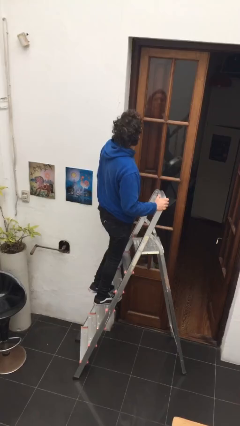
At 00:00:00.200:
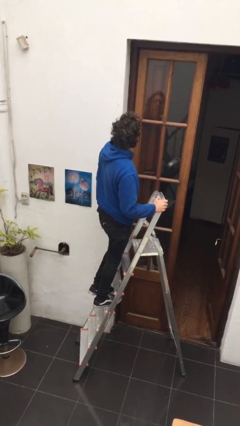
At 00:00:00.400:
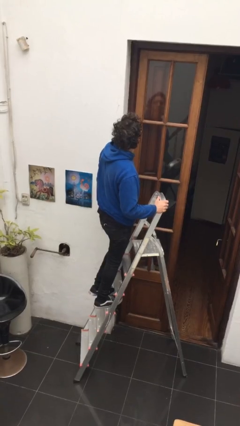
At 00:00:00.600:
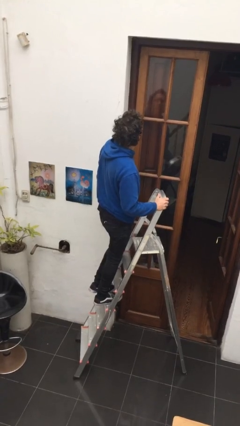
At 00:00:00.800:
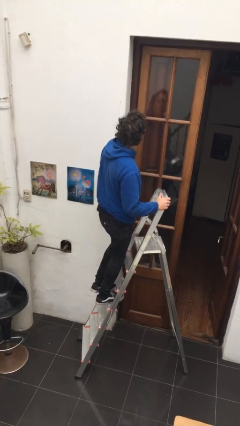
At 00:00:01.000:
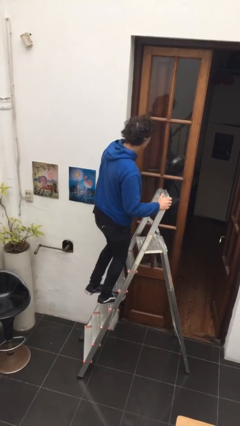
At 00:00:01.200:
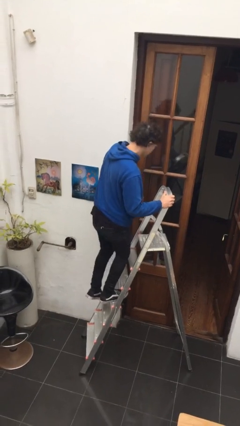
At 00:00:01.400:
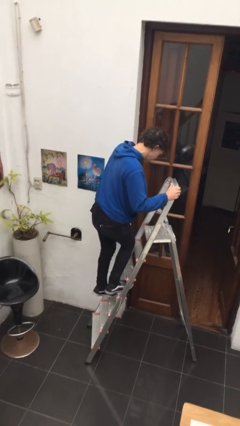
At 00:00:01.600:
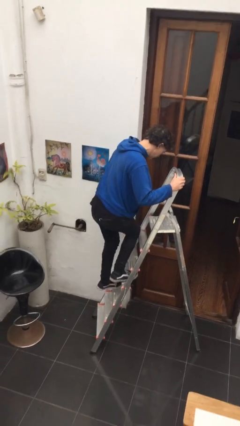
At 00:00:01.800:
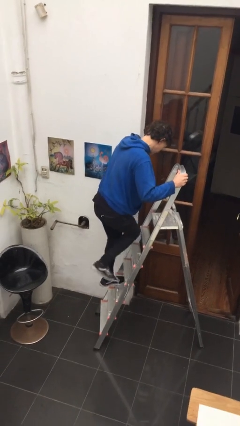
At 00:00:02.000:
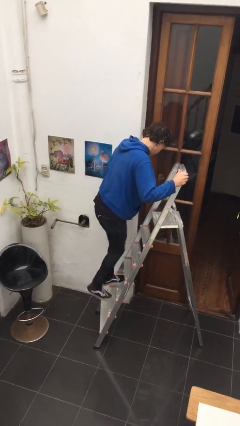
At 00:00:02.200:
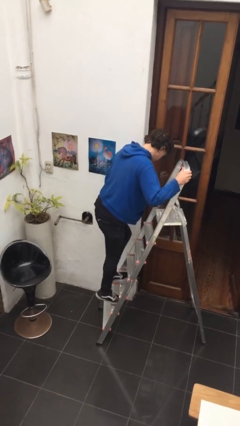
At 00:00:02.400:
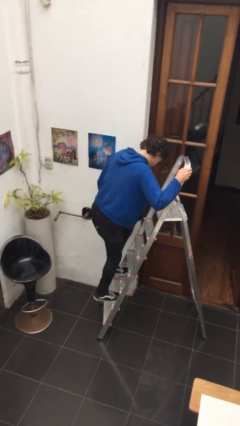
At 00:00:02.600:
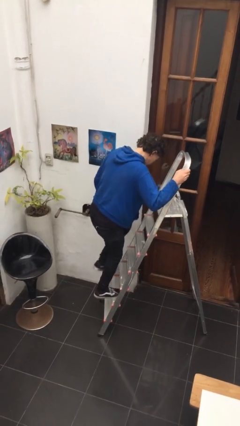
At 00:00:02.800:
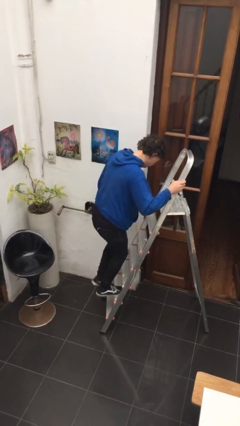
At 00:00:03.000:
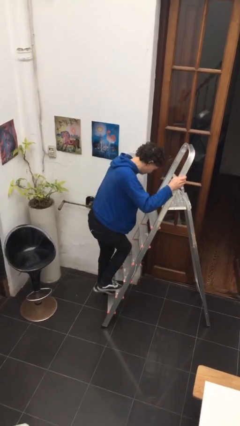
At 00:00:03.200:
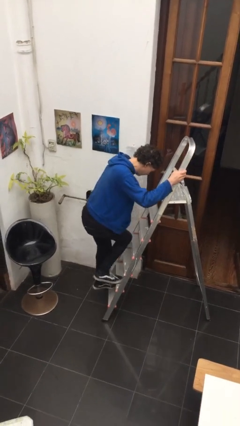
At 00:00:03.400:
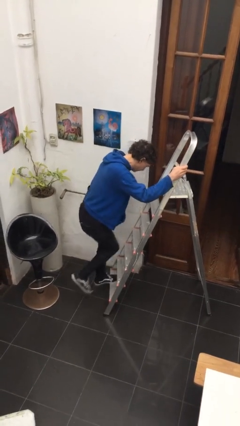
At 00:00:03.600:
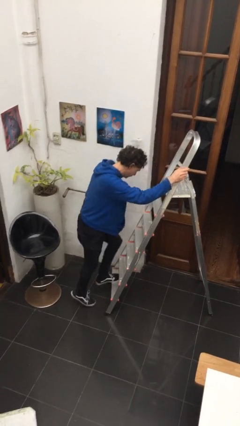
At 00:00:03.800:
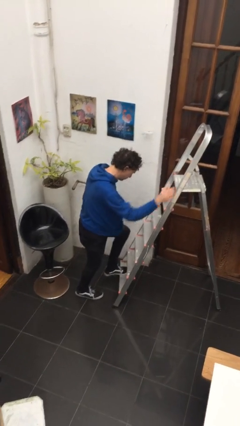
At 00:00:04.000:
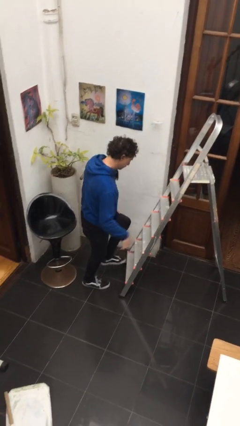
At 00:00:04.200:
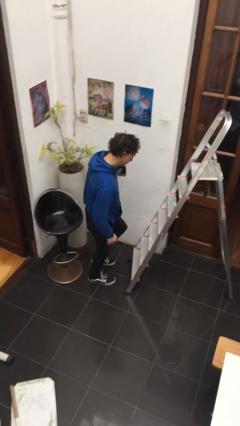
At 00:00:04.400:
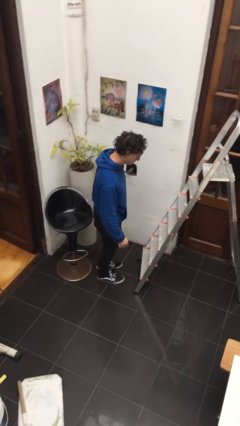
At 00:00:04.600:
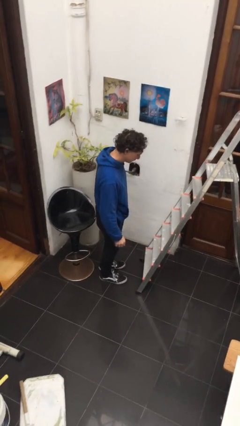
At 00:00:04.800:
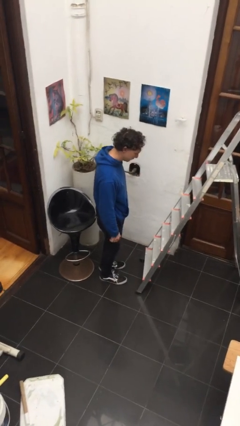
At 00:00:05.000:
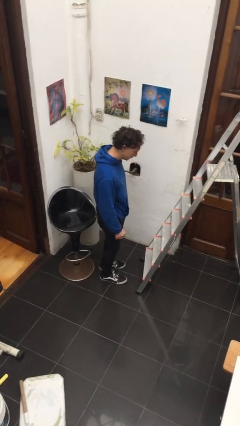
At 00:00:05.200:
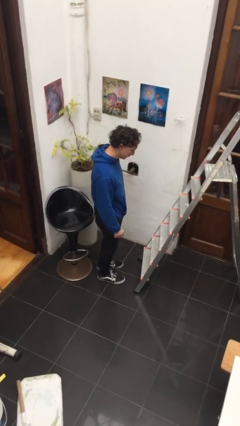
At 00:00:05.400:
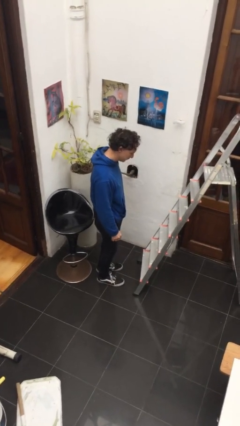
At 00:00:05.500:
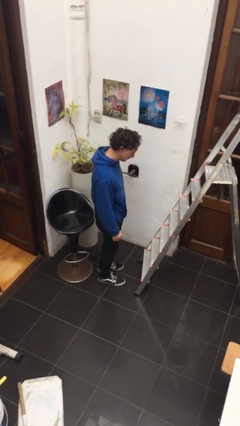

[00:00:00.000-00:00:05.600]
person climbs down ladder

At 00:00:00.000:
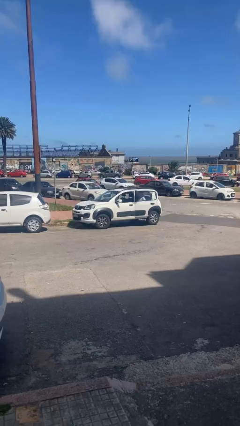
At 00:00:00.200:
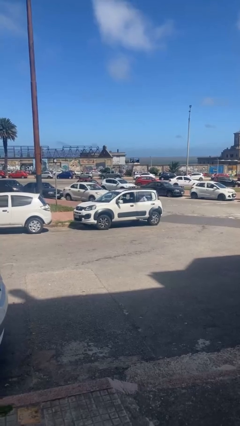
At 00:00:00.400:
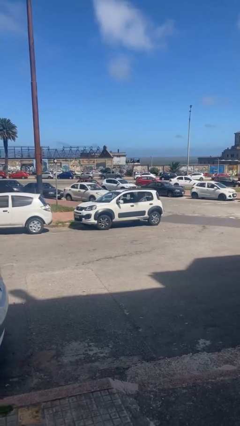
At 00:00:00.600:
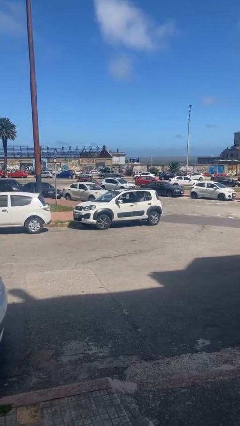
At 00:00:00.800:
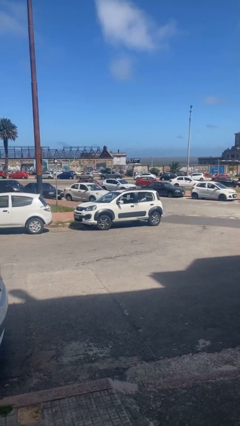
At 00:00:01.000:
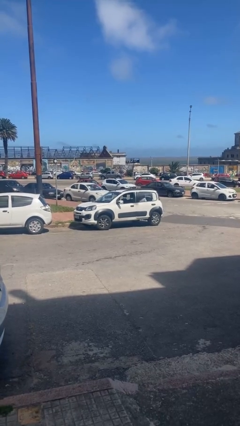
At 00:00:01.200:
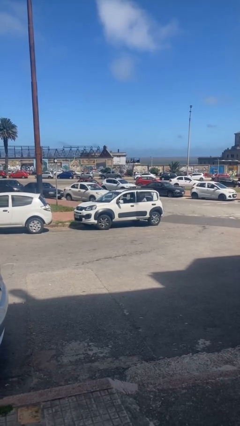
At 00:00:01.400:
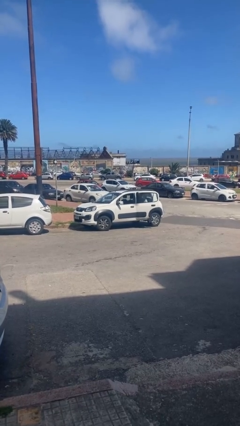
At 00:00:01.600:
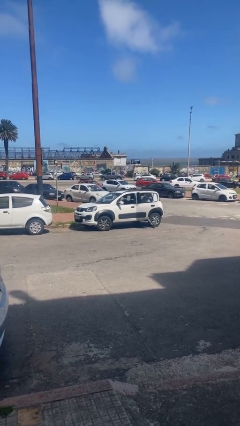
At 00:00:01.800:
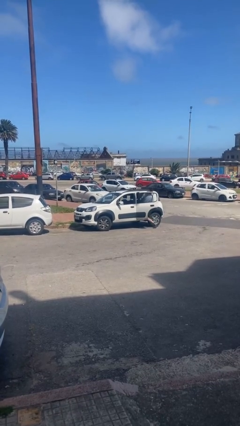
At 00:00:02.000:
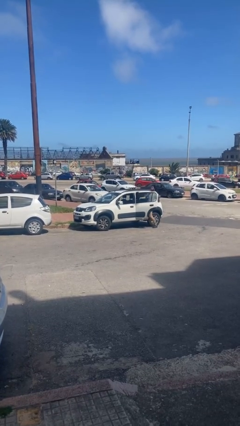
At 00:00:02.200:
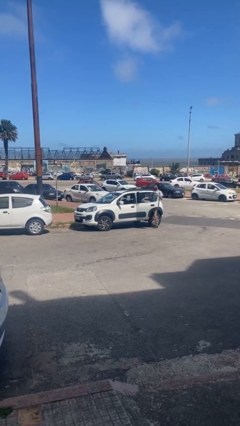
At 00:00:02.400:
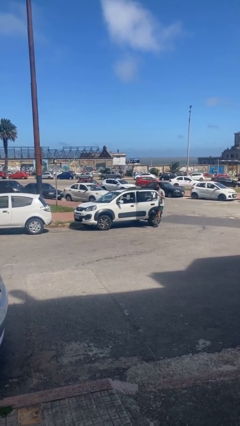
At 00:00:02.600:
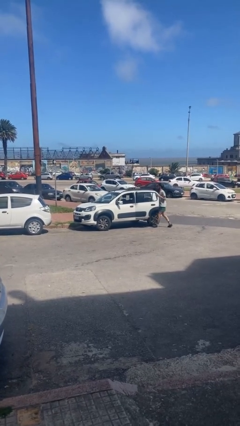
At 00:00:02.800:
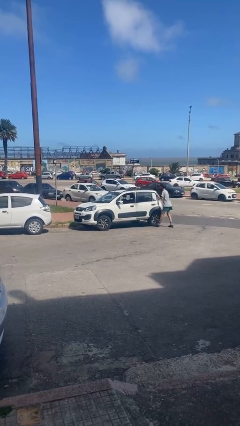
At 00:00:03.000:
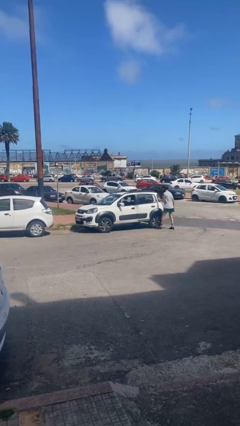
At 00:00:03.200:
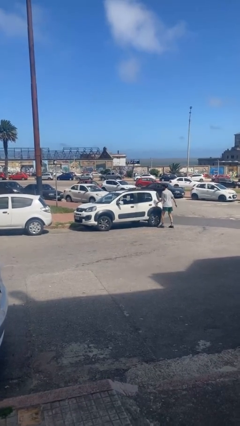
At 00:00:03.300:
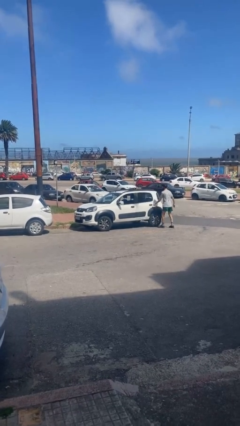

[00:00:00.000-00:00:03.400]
car drops off person

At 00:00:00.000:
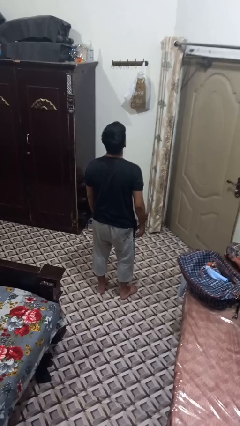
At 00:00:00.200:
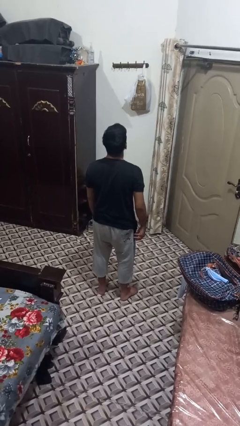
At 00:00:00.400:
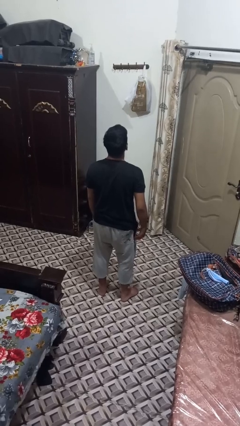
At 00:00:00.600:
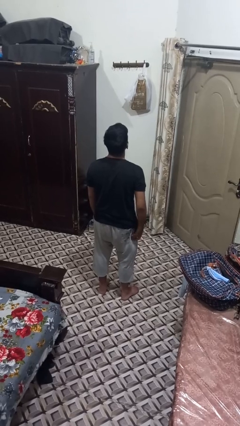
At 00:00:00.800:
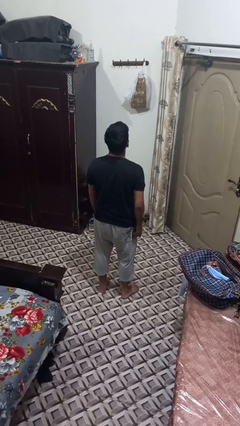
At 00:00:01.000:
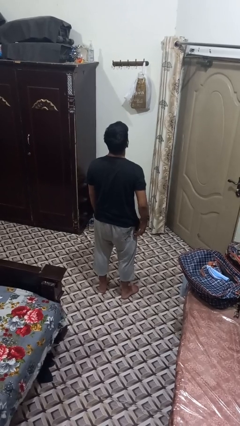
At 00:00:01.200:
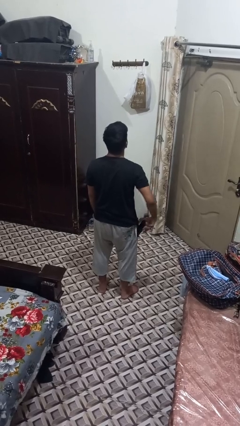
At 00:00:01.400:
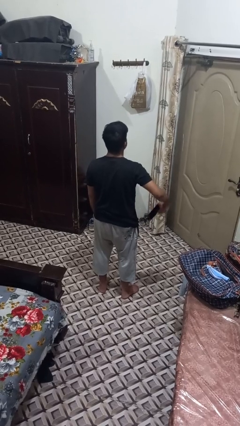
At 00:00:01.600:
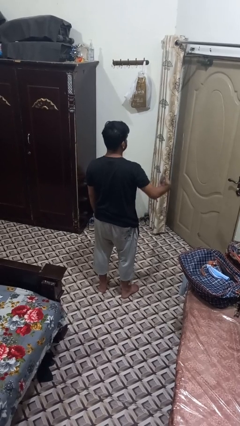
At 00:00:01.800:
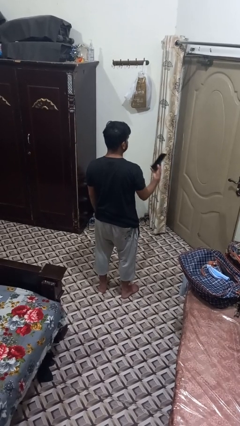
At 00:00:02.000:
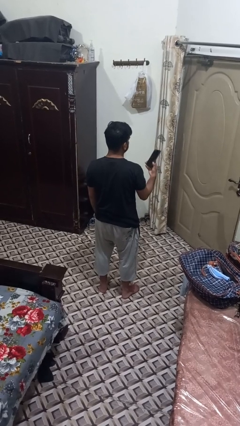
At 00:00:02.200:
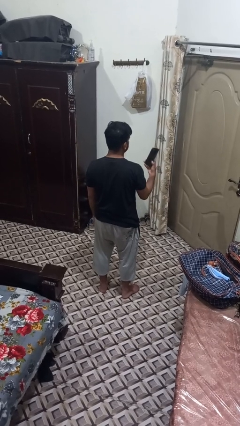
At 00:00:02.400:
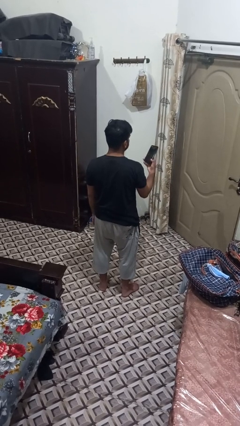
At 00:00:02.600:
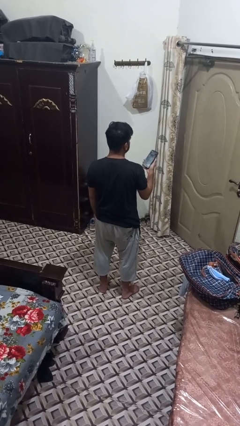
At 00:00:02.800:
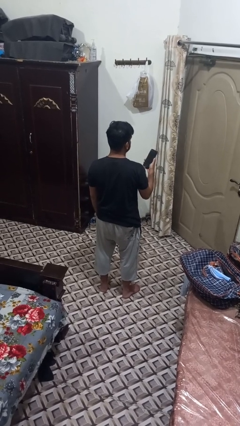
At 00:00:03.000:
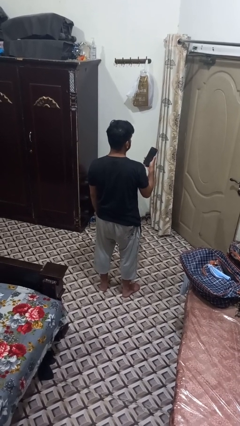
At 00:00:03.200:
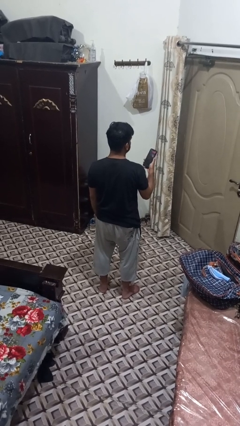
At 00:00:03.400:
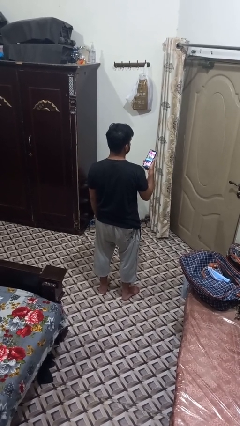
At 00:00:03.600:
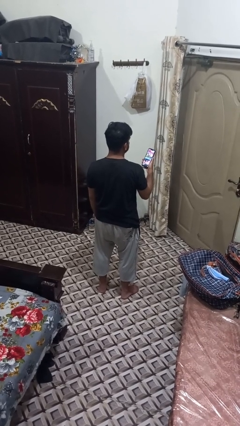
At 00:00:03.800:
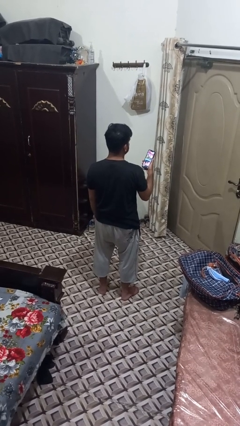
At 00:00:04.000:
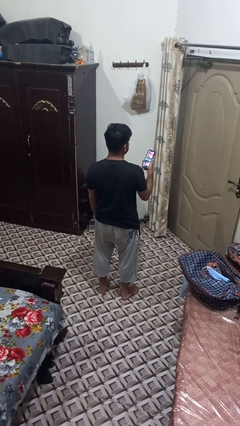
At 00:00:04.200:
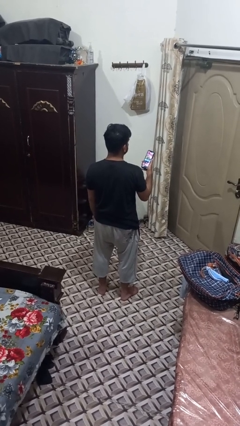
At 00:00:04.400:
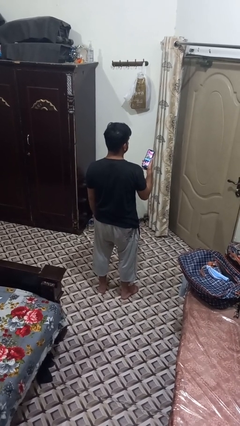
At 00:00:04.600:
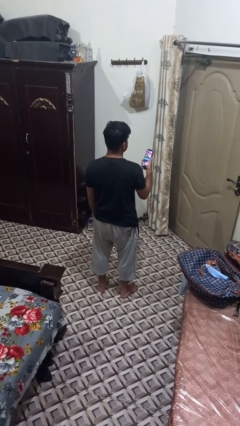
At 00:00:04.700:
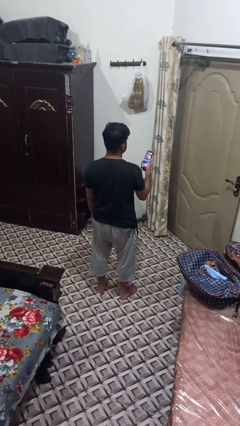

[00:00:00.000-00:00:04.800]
person takes phone from pocket

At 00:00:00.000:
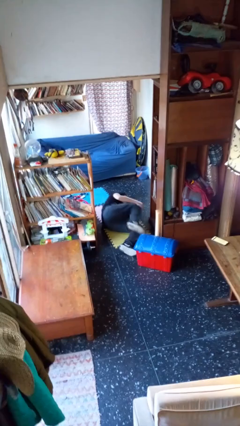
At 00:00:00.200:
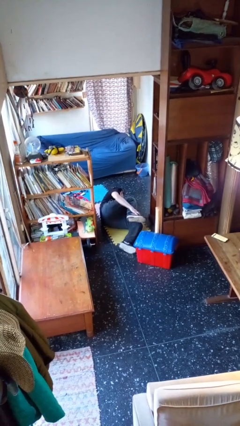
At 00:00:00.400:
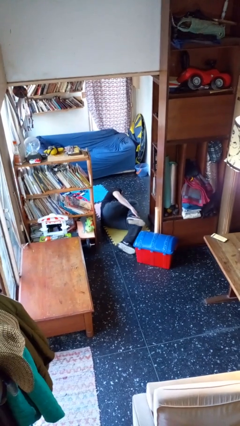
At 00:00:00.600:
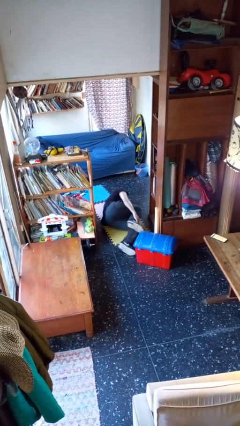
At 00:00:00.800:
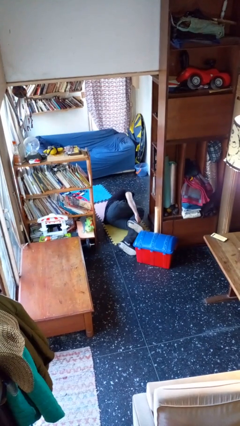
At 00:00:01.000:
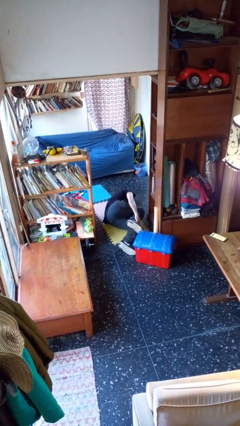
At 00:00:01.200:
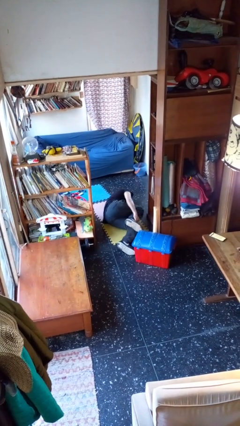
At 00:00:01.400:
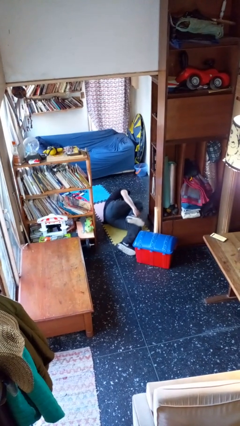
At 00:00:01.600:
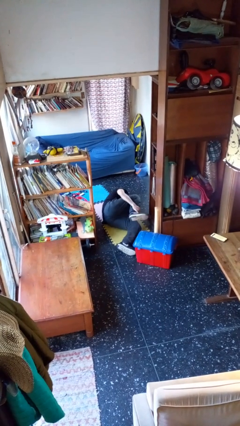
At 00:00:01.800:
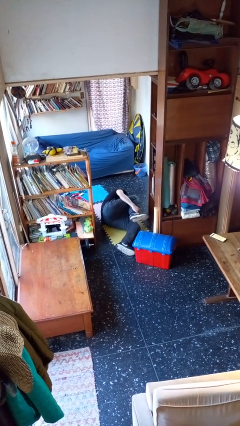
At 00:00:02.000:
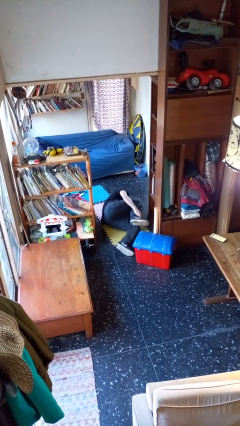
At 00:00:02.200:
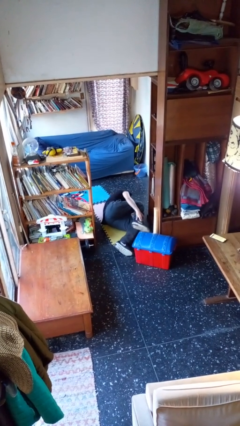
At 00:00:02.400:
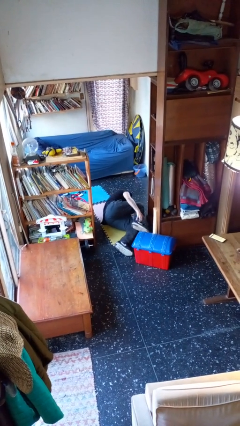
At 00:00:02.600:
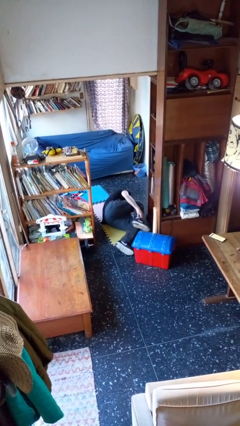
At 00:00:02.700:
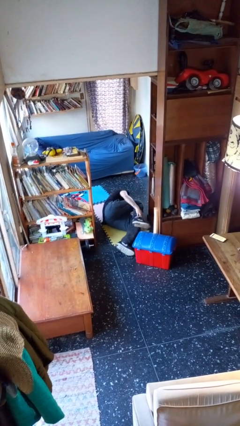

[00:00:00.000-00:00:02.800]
person lies down on floor

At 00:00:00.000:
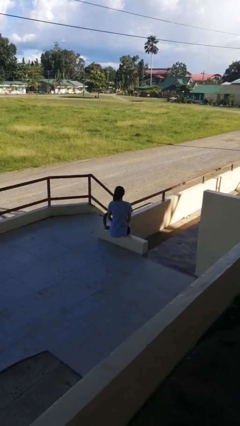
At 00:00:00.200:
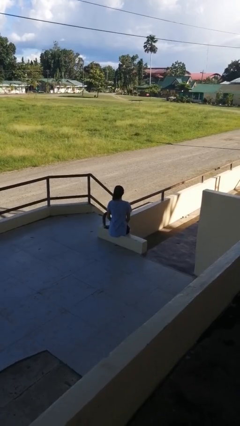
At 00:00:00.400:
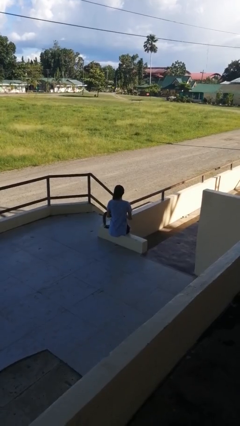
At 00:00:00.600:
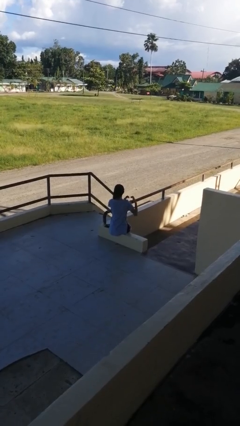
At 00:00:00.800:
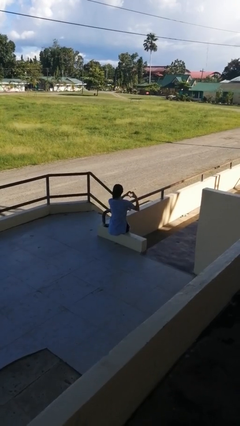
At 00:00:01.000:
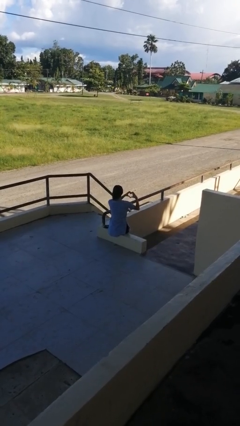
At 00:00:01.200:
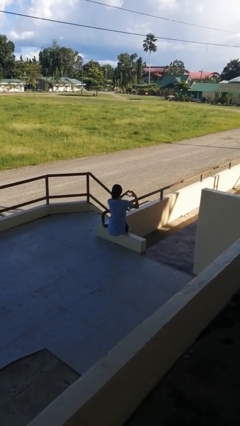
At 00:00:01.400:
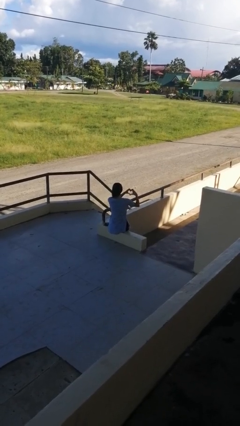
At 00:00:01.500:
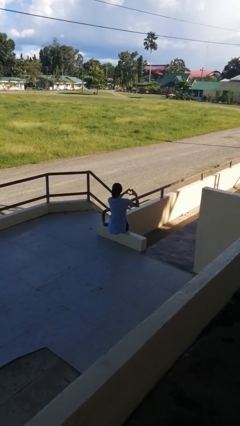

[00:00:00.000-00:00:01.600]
person gestures heart
